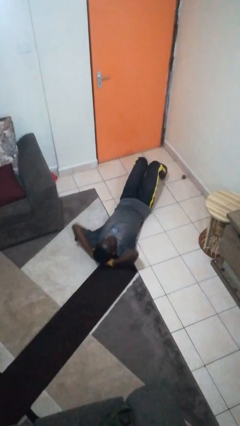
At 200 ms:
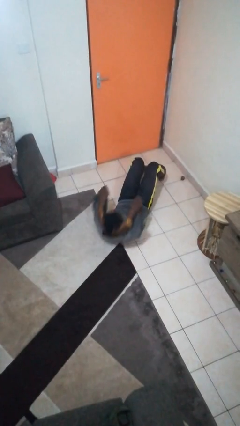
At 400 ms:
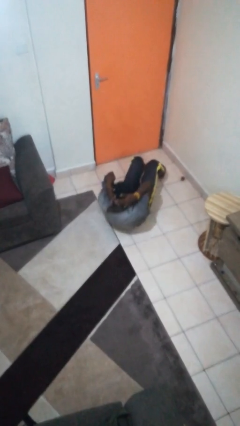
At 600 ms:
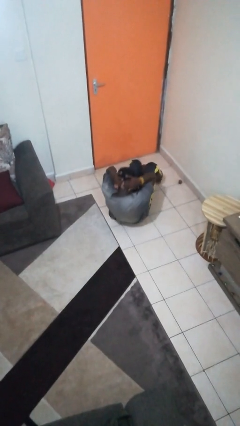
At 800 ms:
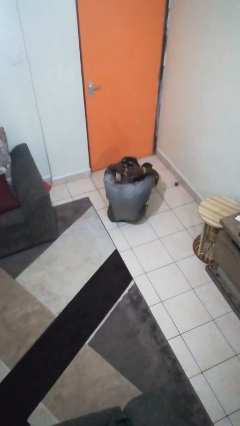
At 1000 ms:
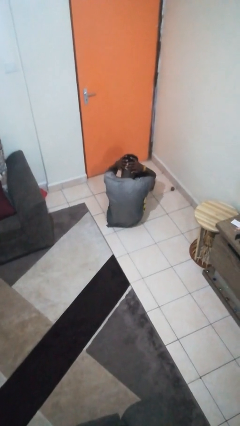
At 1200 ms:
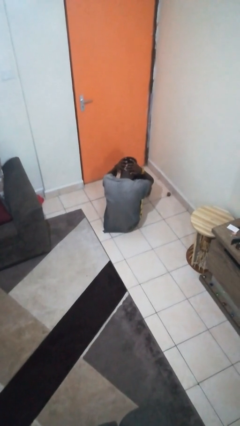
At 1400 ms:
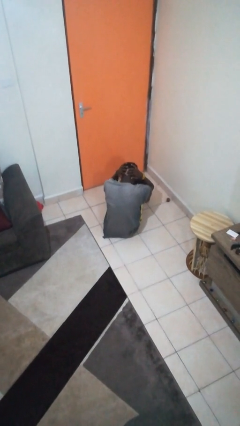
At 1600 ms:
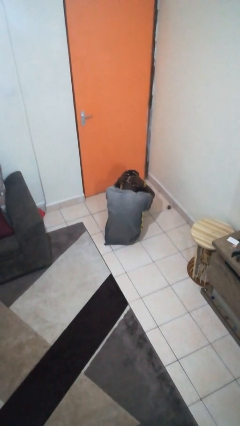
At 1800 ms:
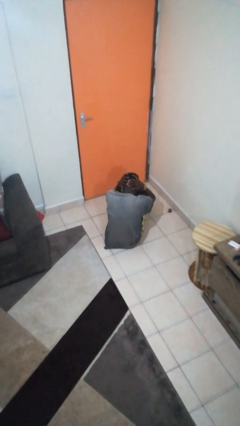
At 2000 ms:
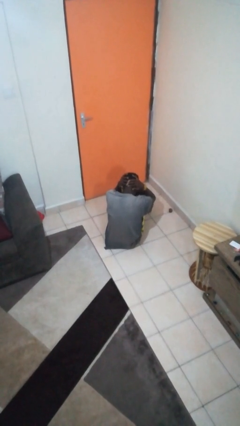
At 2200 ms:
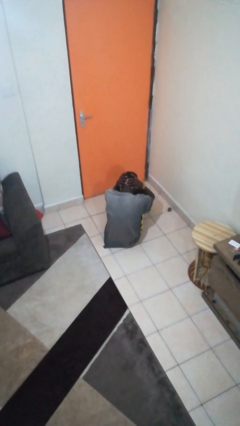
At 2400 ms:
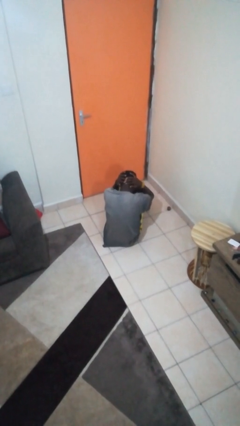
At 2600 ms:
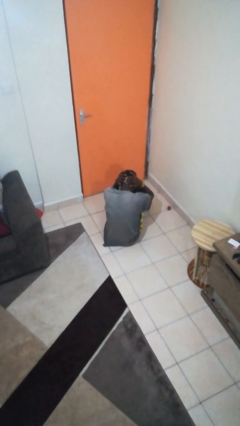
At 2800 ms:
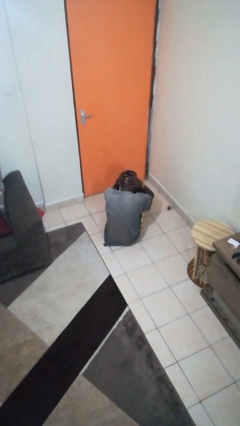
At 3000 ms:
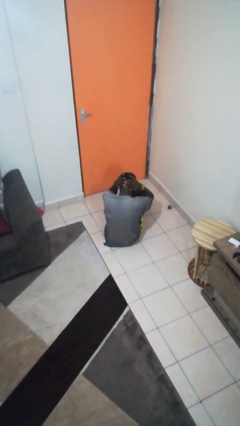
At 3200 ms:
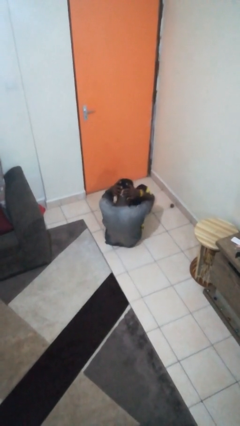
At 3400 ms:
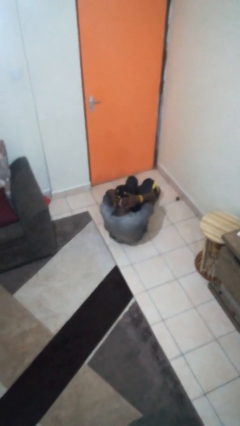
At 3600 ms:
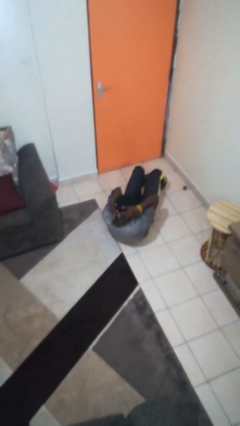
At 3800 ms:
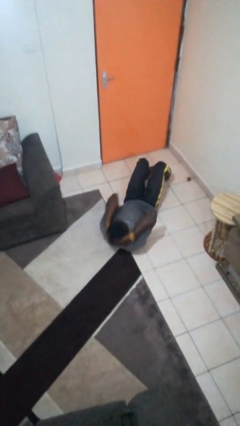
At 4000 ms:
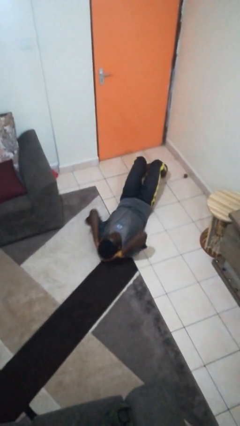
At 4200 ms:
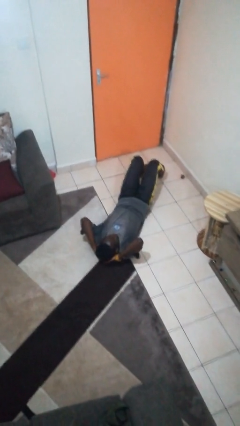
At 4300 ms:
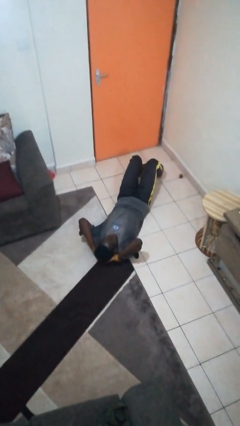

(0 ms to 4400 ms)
person exercises with situp

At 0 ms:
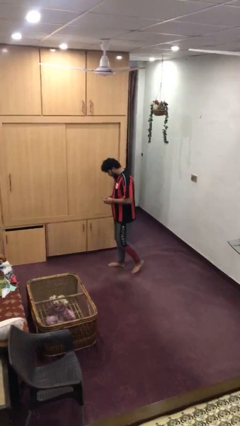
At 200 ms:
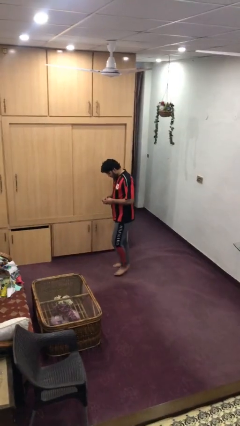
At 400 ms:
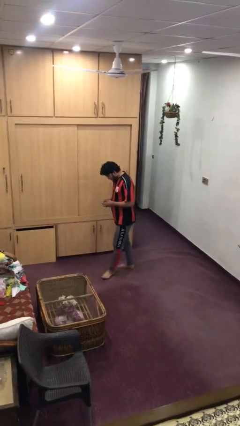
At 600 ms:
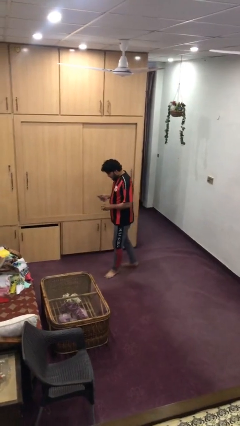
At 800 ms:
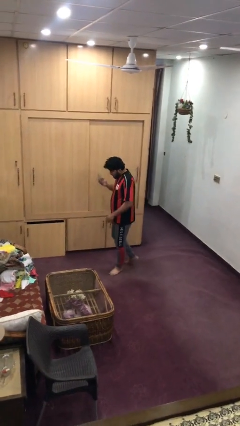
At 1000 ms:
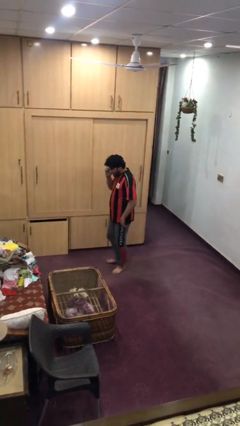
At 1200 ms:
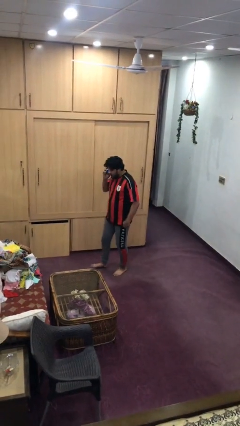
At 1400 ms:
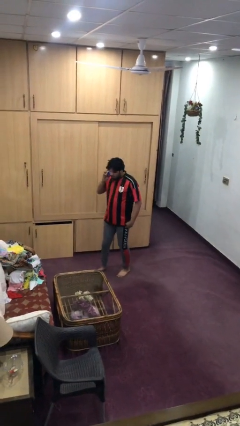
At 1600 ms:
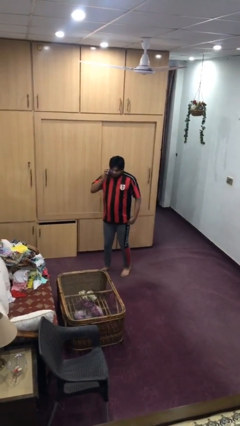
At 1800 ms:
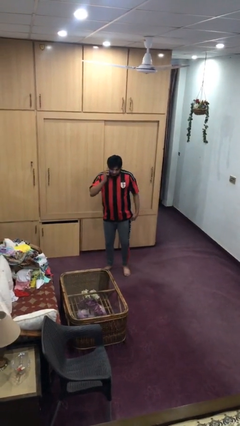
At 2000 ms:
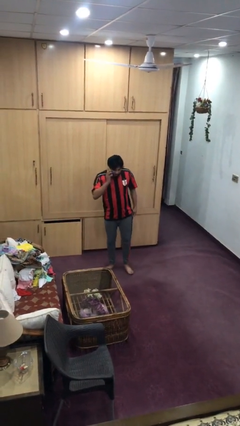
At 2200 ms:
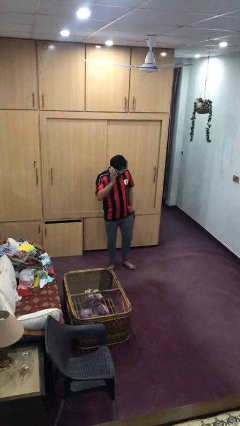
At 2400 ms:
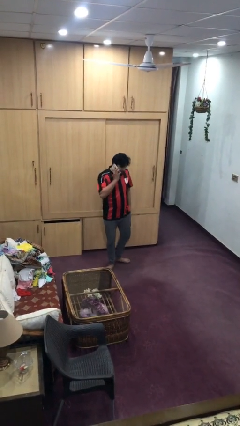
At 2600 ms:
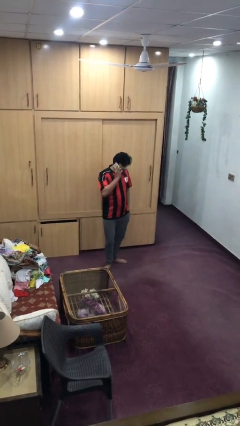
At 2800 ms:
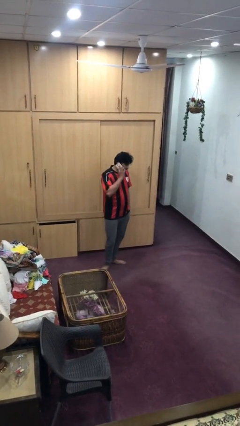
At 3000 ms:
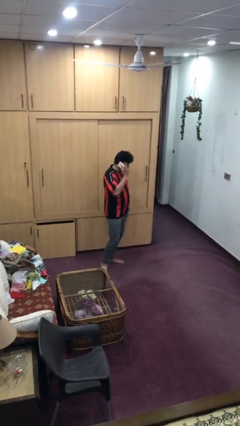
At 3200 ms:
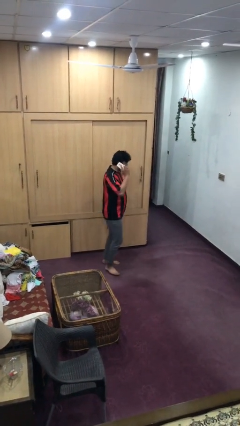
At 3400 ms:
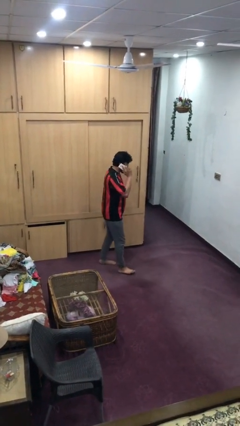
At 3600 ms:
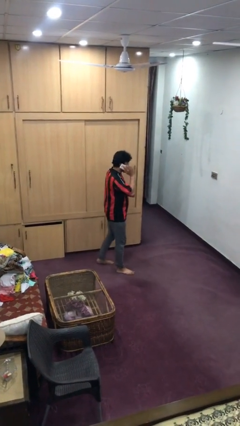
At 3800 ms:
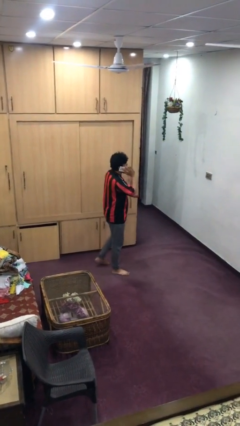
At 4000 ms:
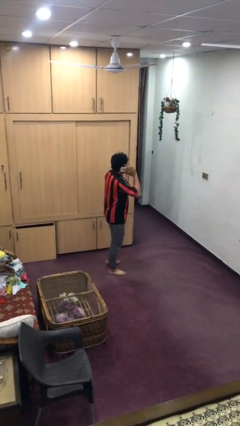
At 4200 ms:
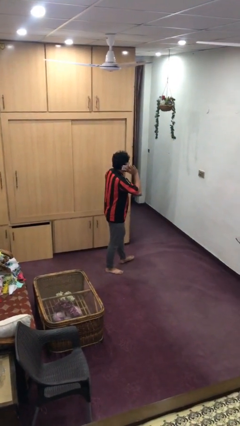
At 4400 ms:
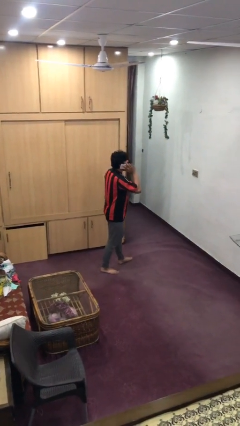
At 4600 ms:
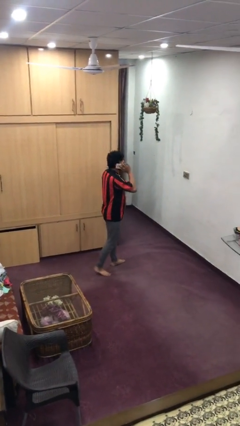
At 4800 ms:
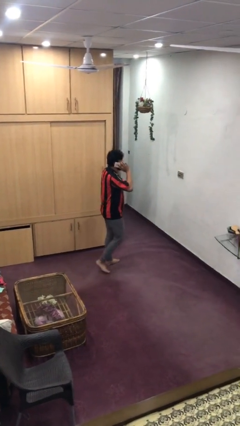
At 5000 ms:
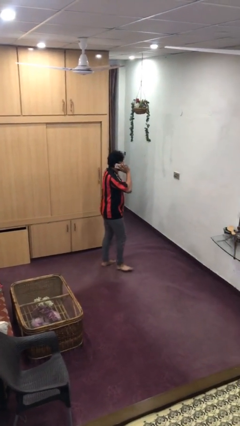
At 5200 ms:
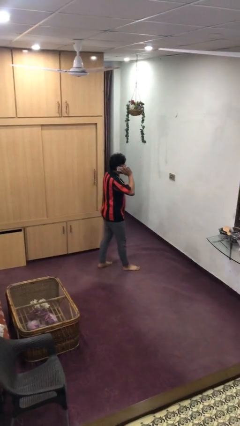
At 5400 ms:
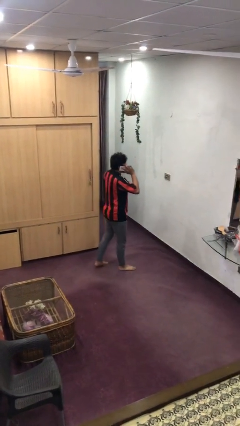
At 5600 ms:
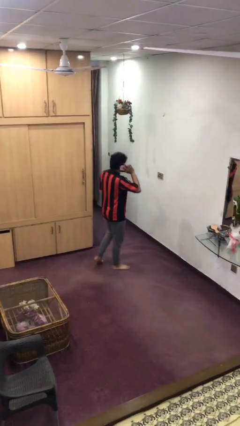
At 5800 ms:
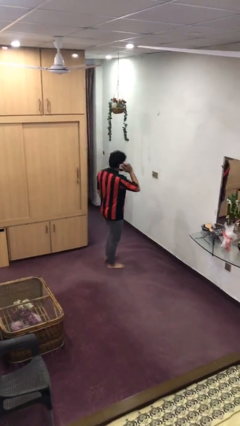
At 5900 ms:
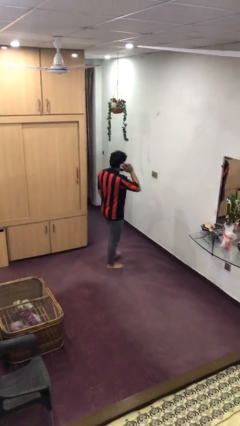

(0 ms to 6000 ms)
person talks on phone

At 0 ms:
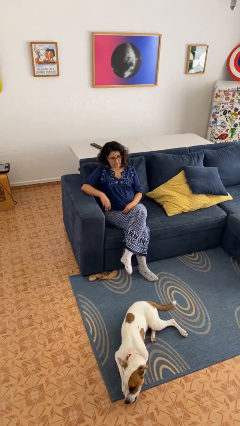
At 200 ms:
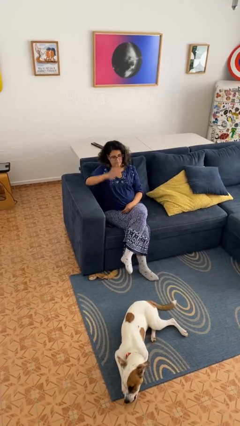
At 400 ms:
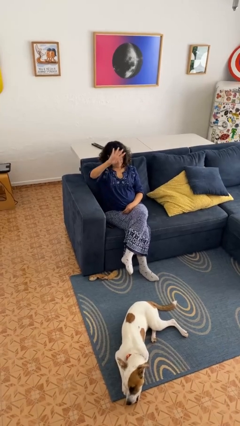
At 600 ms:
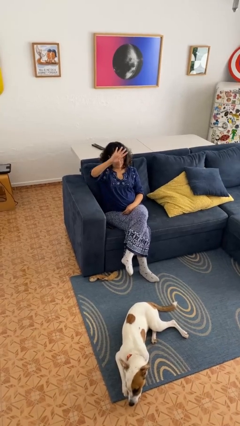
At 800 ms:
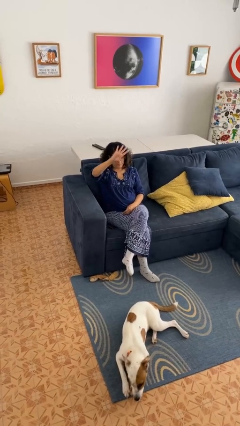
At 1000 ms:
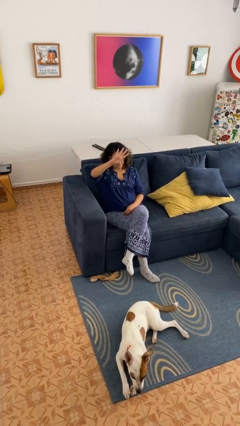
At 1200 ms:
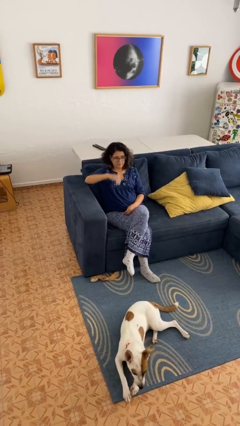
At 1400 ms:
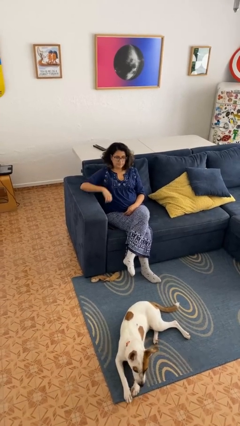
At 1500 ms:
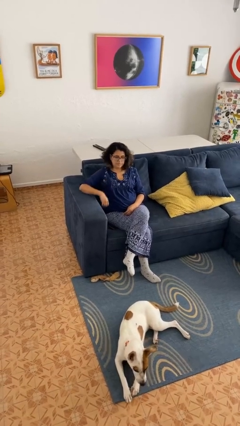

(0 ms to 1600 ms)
person gestures number four

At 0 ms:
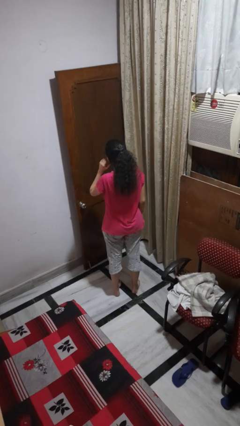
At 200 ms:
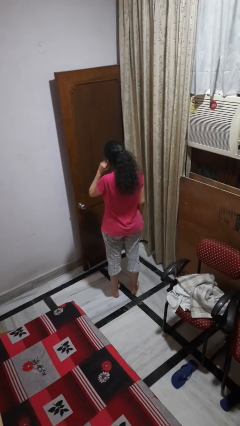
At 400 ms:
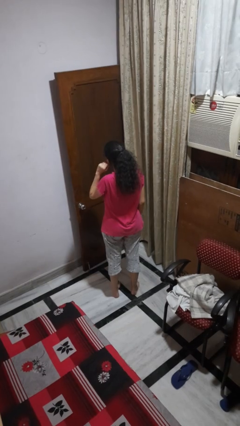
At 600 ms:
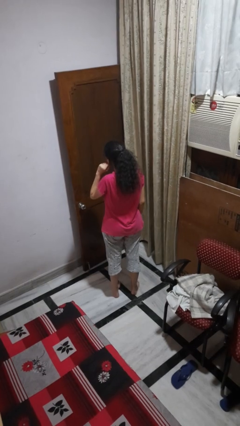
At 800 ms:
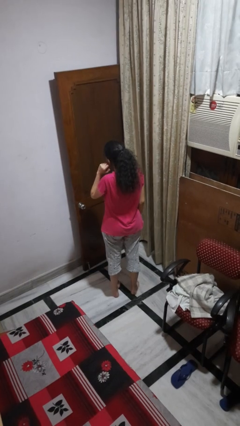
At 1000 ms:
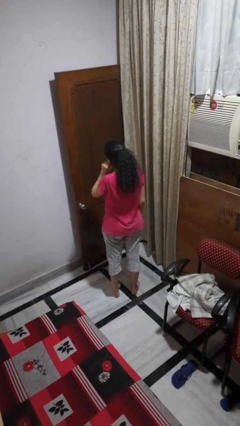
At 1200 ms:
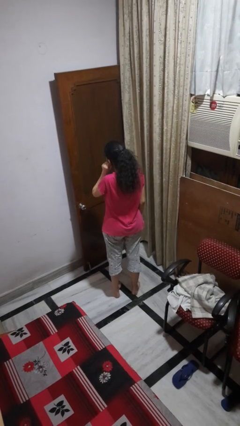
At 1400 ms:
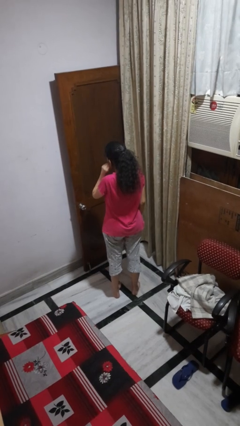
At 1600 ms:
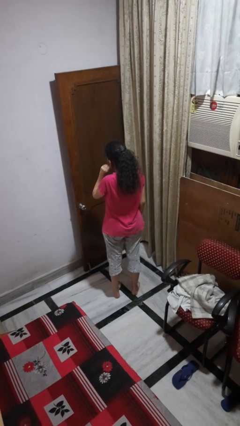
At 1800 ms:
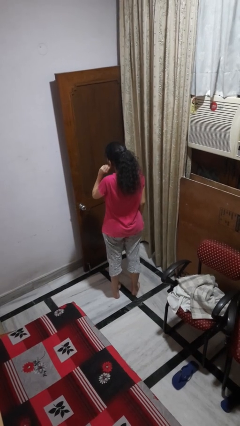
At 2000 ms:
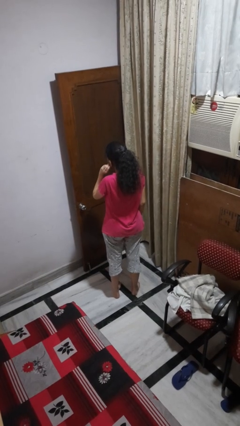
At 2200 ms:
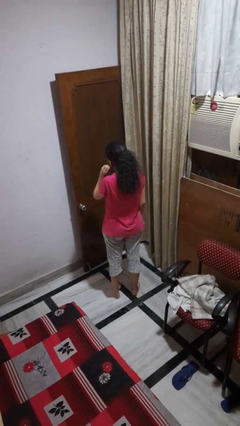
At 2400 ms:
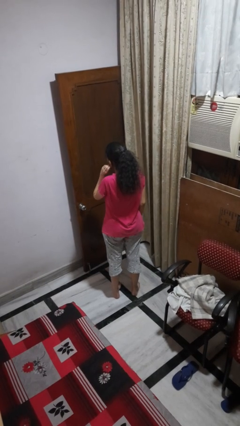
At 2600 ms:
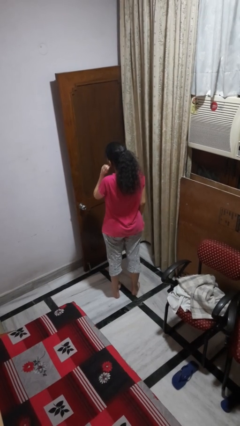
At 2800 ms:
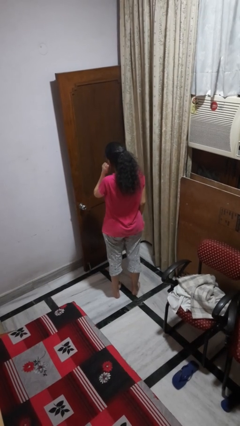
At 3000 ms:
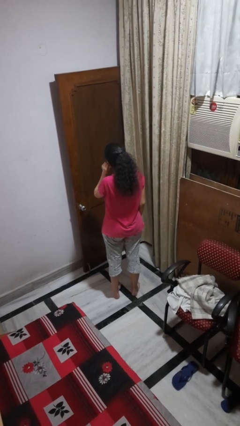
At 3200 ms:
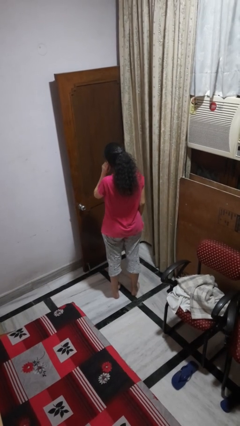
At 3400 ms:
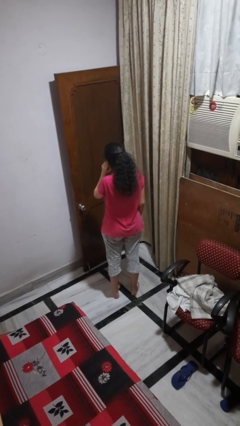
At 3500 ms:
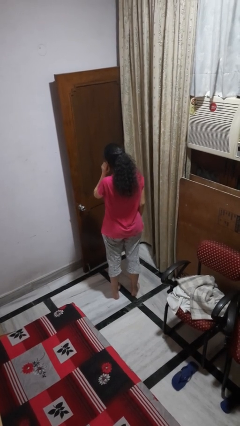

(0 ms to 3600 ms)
person touches earlobe

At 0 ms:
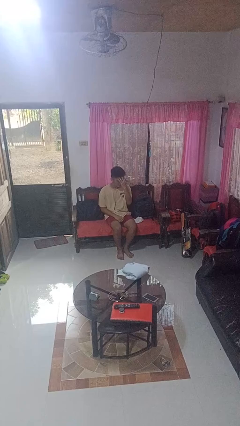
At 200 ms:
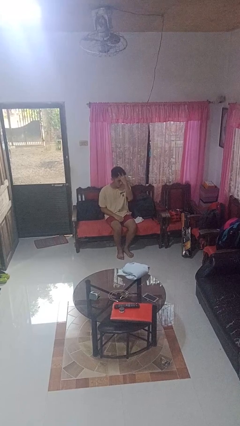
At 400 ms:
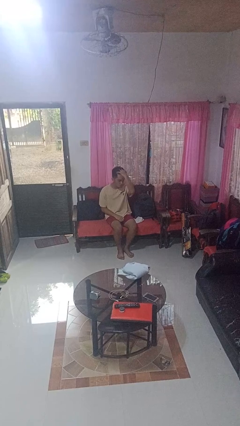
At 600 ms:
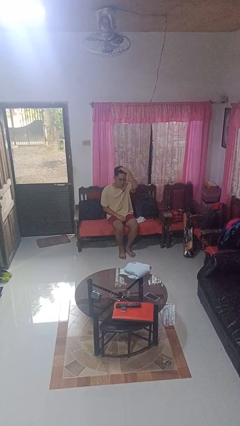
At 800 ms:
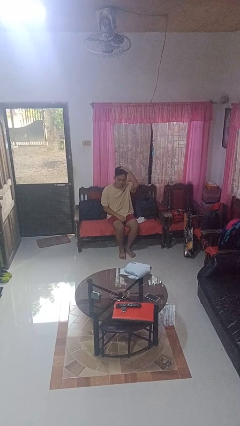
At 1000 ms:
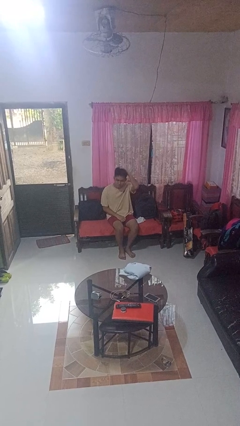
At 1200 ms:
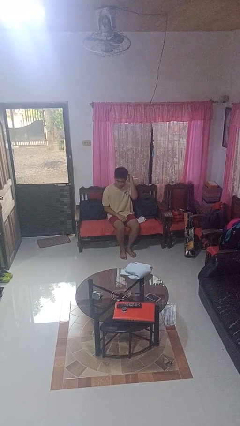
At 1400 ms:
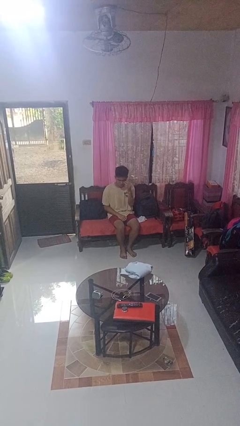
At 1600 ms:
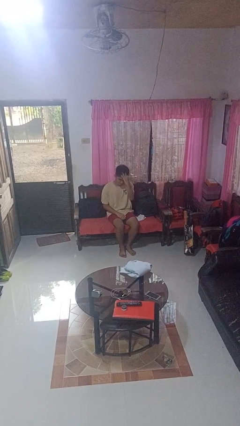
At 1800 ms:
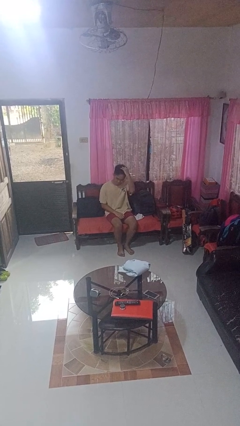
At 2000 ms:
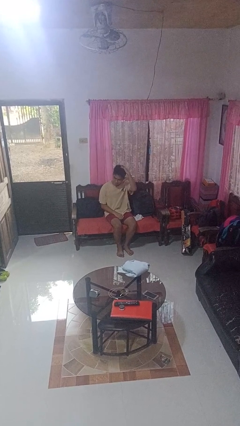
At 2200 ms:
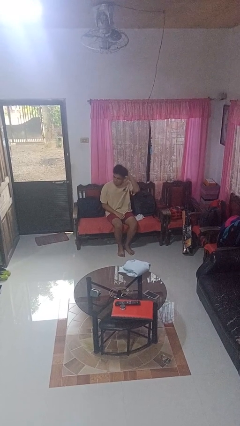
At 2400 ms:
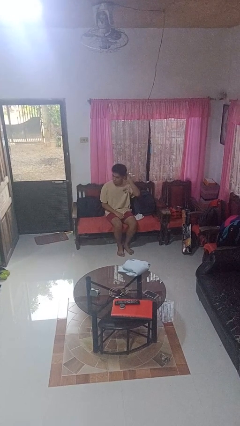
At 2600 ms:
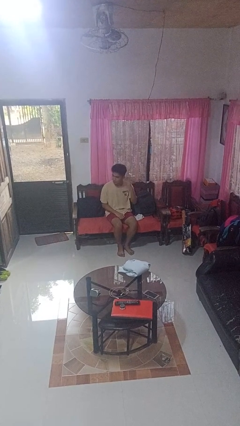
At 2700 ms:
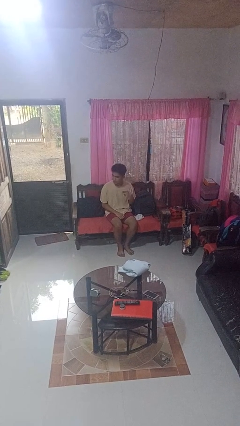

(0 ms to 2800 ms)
person strokes hair
